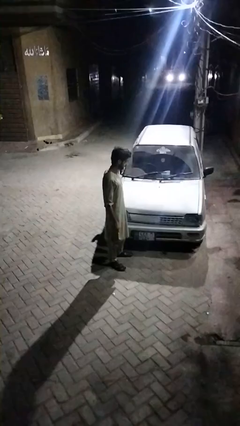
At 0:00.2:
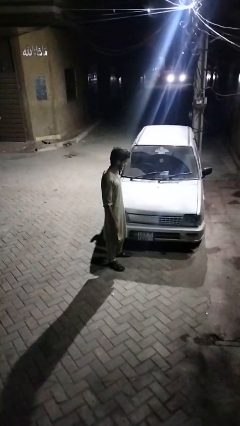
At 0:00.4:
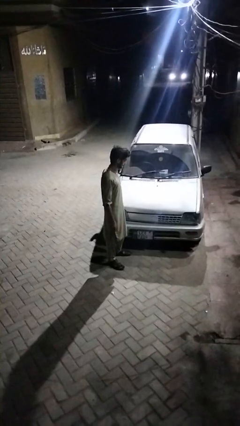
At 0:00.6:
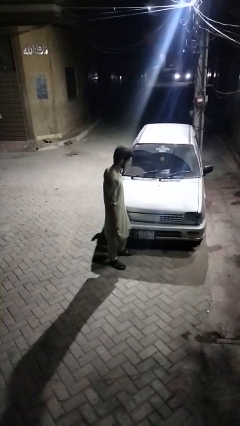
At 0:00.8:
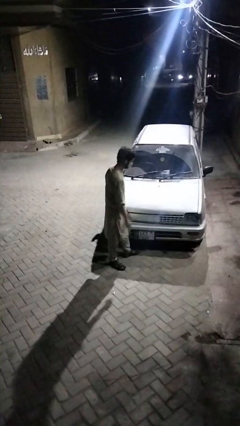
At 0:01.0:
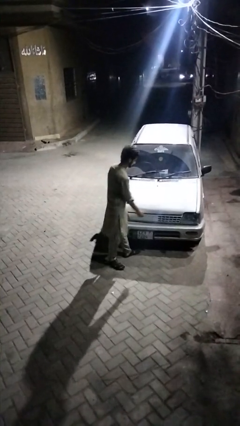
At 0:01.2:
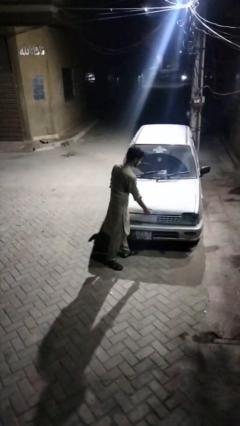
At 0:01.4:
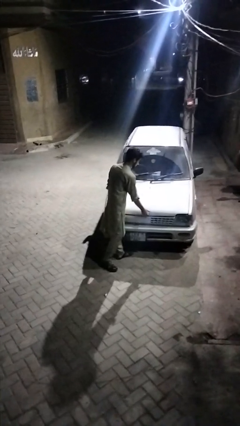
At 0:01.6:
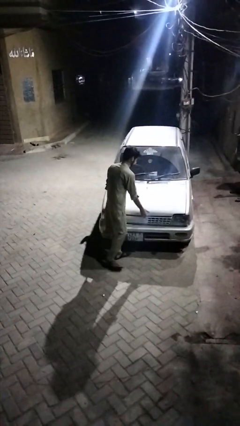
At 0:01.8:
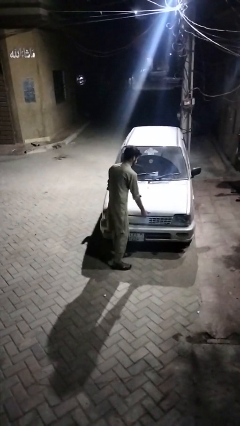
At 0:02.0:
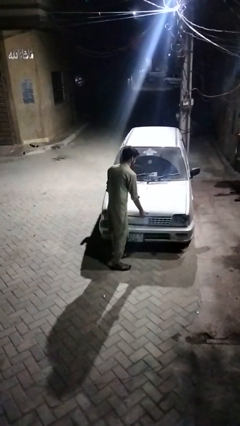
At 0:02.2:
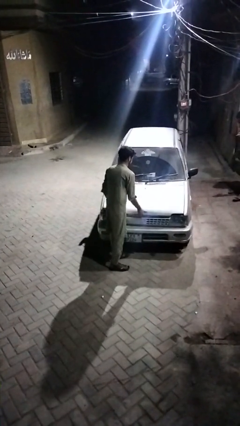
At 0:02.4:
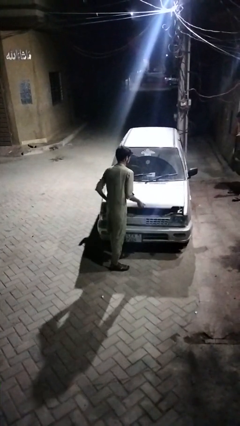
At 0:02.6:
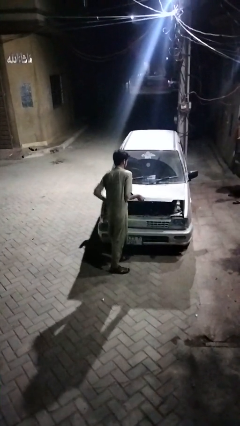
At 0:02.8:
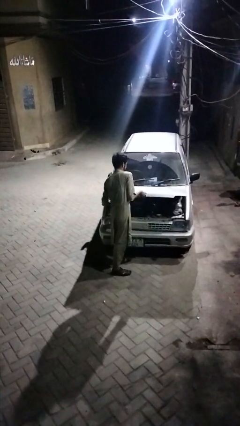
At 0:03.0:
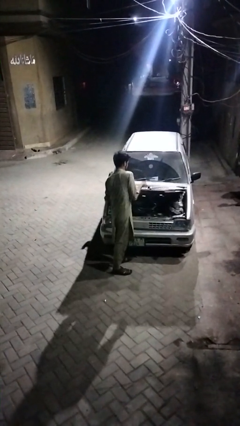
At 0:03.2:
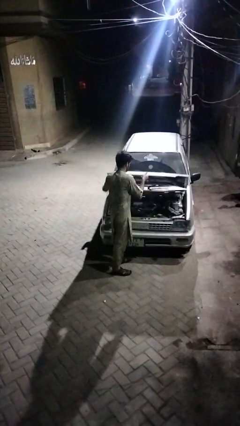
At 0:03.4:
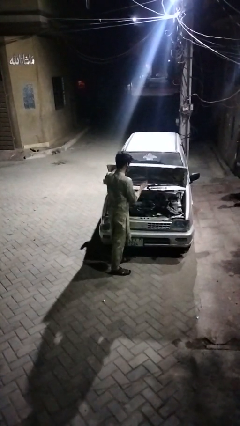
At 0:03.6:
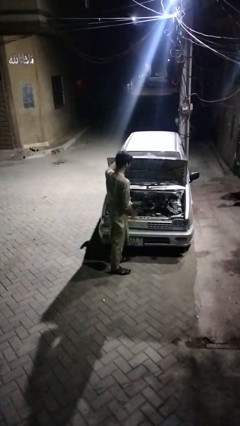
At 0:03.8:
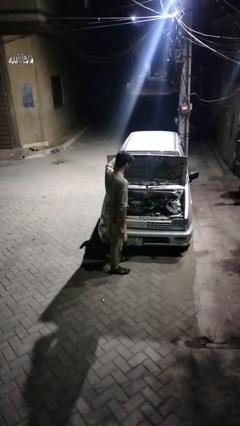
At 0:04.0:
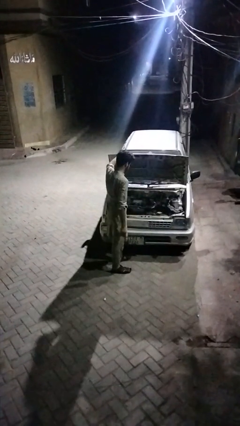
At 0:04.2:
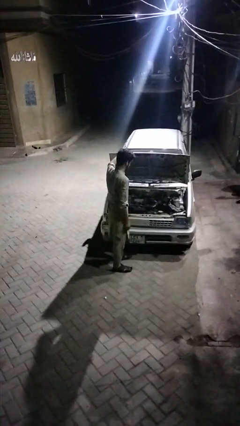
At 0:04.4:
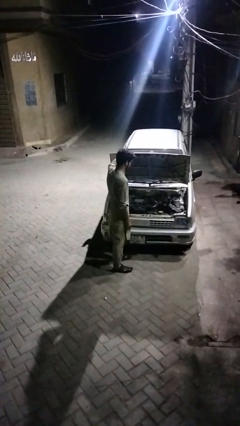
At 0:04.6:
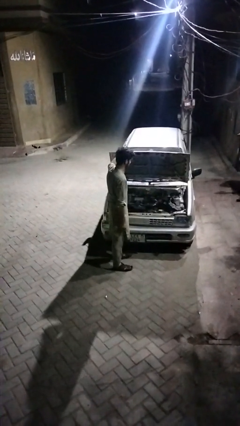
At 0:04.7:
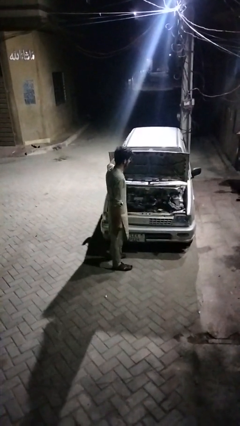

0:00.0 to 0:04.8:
person opens car hood

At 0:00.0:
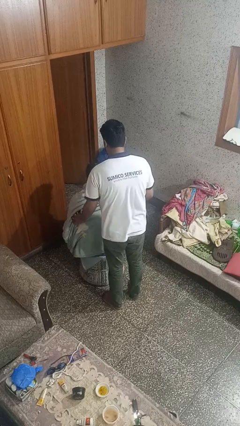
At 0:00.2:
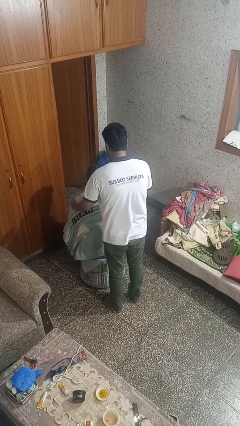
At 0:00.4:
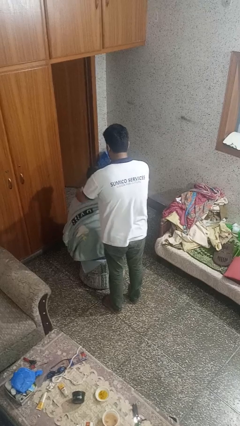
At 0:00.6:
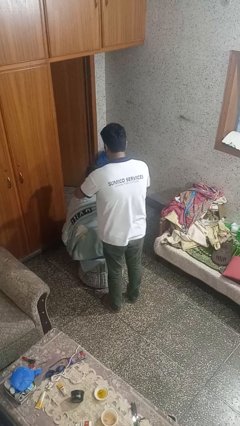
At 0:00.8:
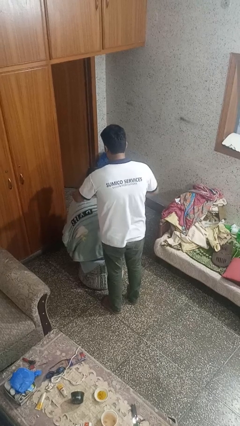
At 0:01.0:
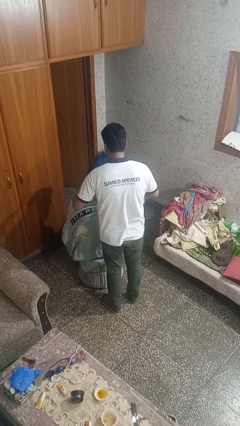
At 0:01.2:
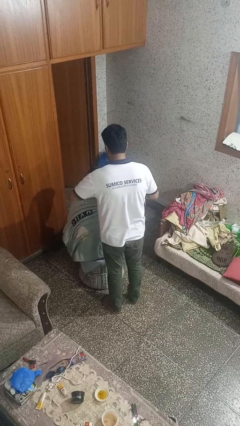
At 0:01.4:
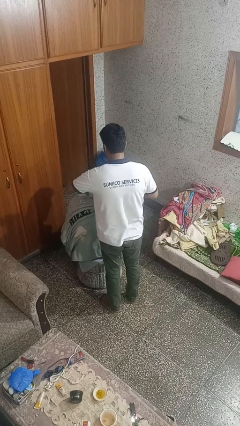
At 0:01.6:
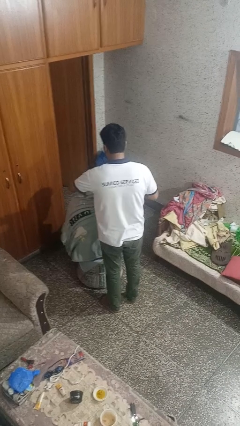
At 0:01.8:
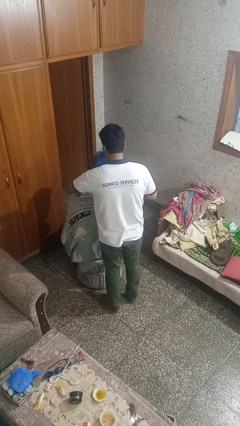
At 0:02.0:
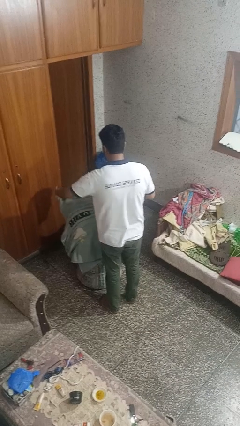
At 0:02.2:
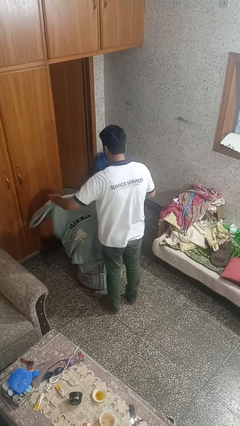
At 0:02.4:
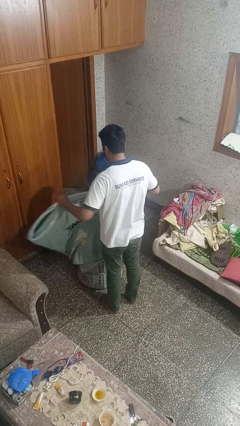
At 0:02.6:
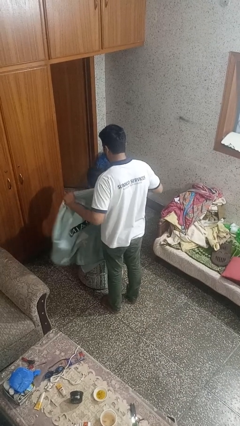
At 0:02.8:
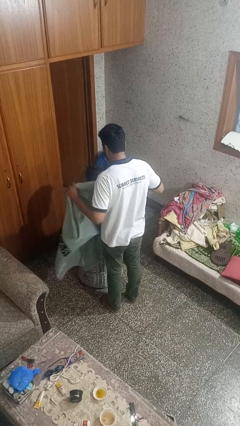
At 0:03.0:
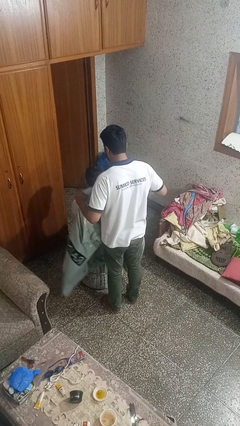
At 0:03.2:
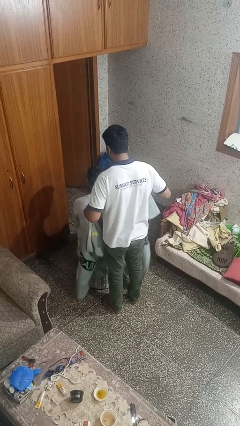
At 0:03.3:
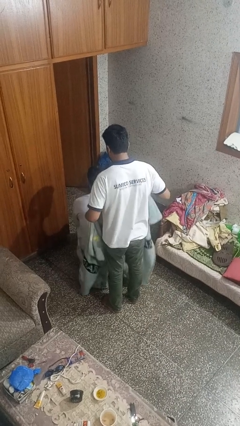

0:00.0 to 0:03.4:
person uncovers friend with blanket

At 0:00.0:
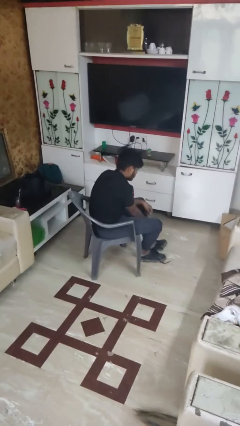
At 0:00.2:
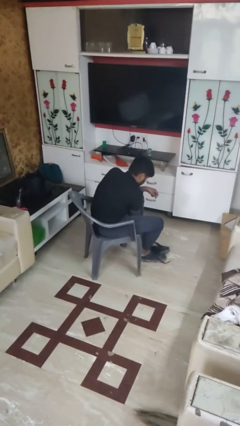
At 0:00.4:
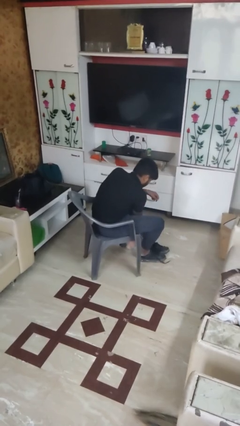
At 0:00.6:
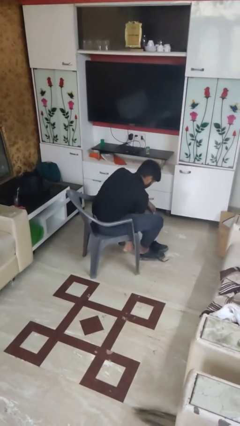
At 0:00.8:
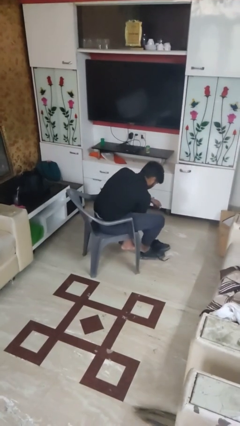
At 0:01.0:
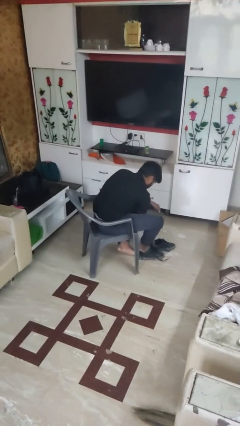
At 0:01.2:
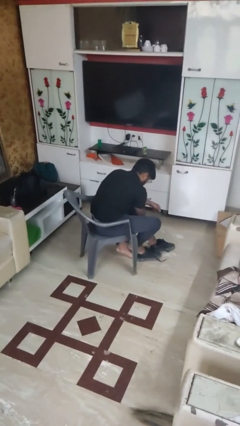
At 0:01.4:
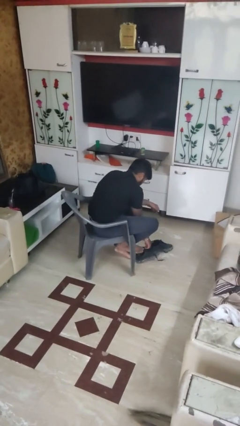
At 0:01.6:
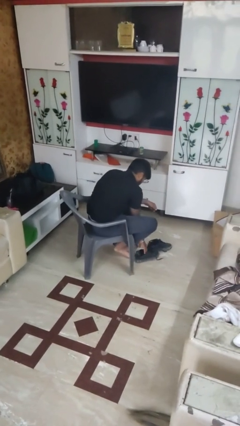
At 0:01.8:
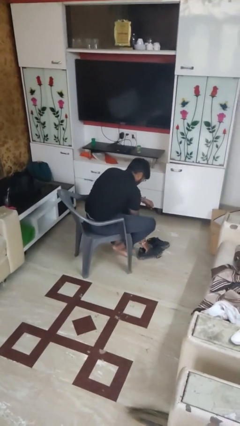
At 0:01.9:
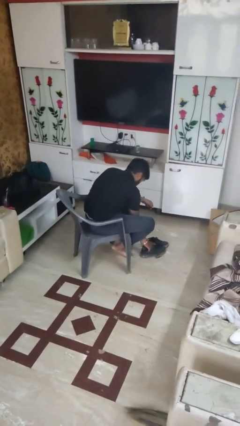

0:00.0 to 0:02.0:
person takes off shoes

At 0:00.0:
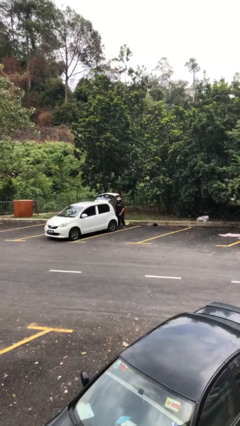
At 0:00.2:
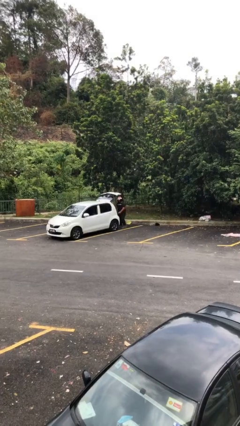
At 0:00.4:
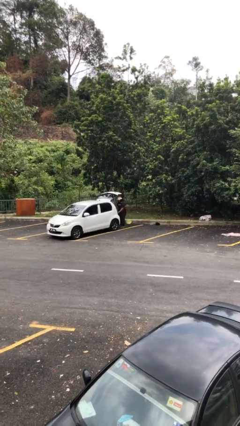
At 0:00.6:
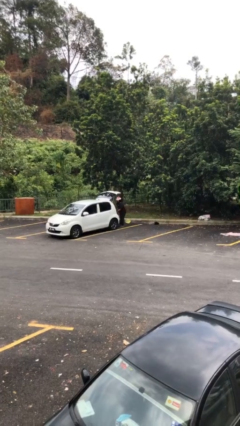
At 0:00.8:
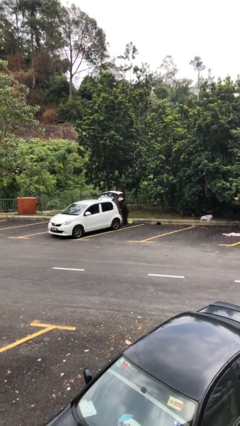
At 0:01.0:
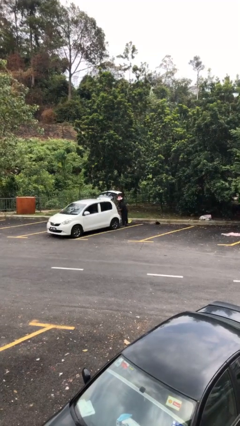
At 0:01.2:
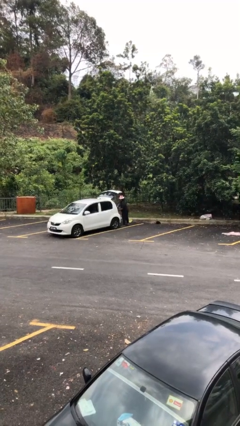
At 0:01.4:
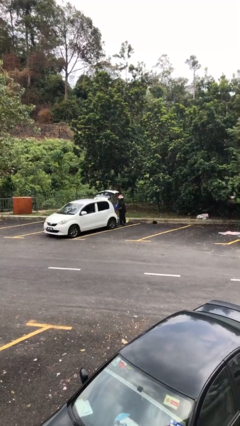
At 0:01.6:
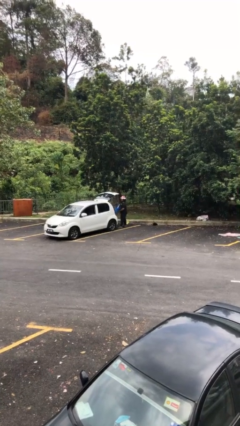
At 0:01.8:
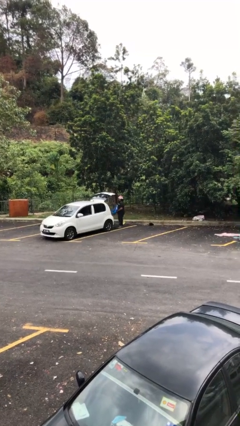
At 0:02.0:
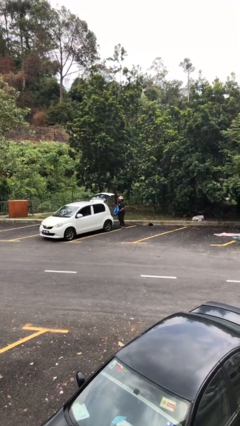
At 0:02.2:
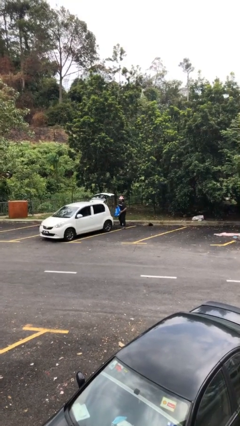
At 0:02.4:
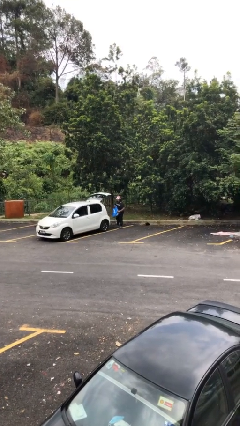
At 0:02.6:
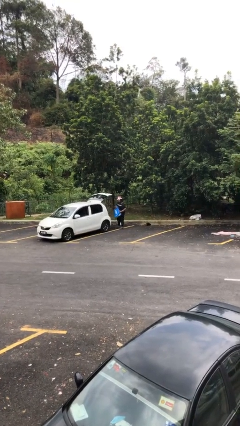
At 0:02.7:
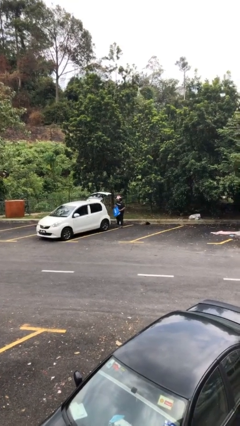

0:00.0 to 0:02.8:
person unloads car

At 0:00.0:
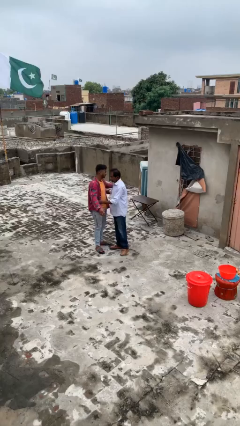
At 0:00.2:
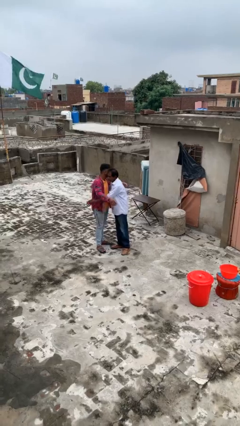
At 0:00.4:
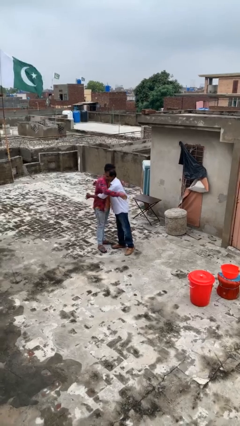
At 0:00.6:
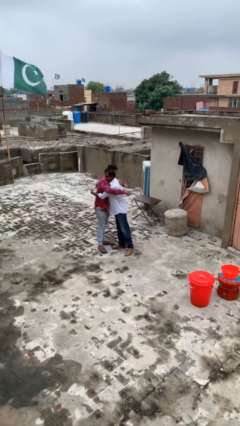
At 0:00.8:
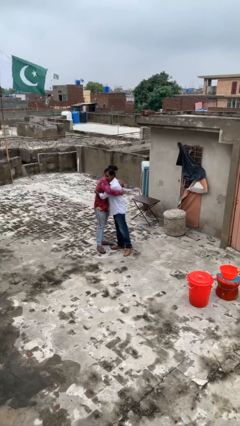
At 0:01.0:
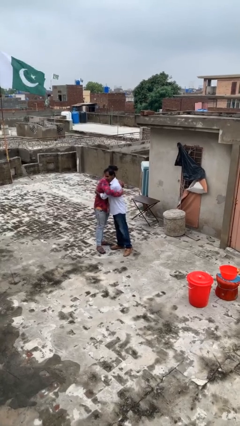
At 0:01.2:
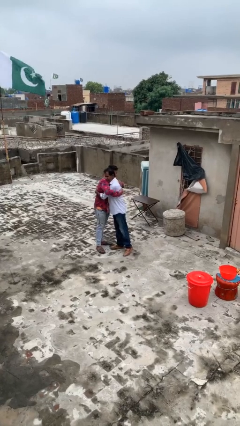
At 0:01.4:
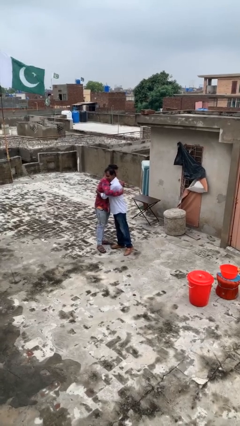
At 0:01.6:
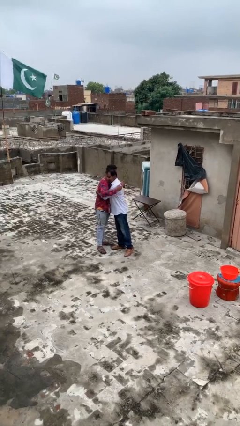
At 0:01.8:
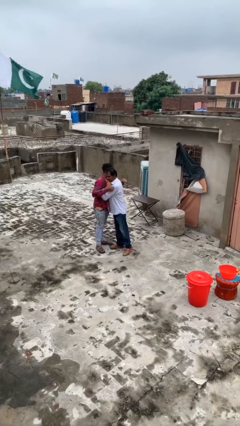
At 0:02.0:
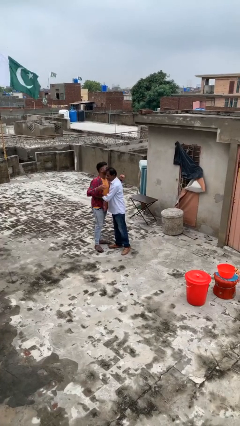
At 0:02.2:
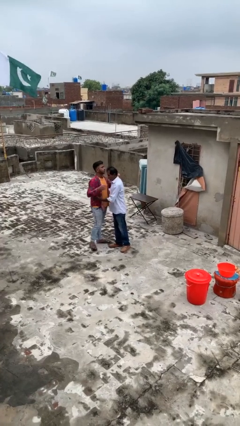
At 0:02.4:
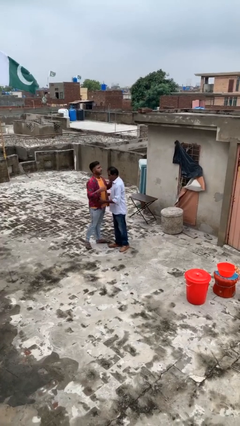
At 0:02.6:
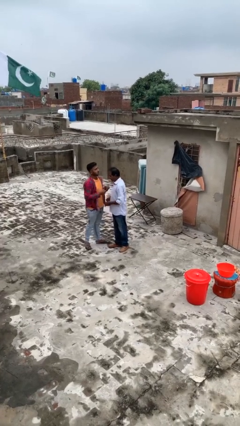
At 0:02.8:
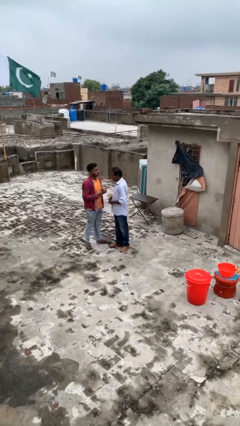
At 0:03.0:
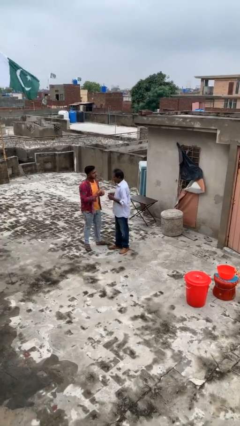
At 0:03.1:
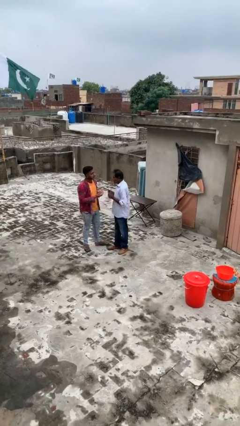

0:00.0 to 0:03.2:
person embraces person

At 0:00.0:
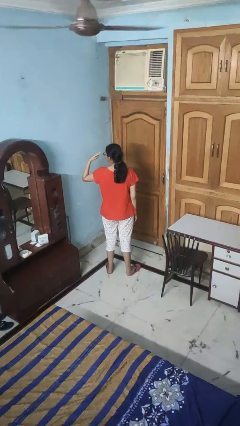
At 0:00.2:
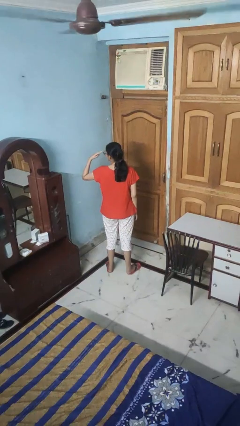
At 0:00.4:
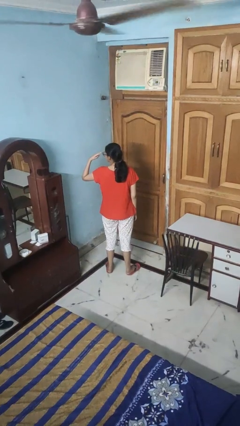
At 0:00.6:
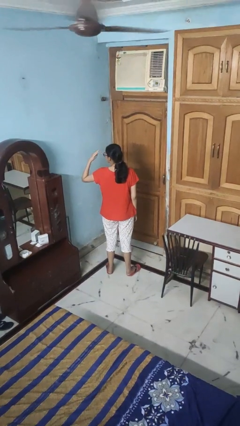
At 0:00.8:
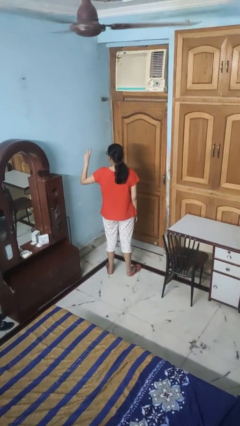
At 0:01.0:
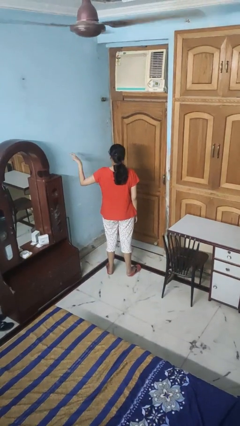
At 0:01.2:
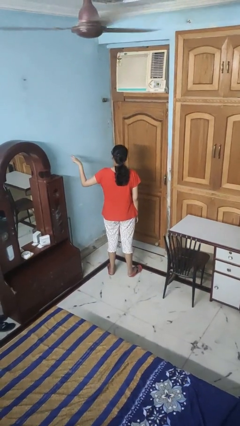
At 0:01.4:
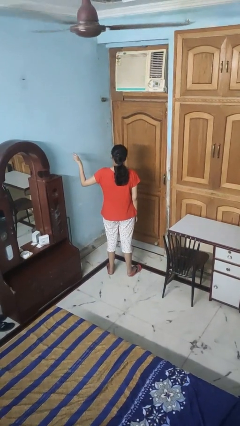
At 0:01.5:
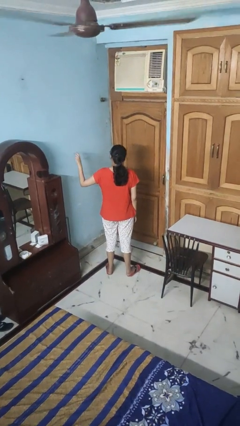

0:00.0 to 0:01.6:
person gestures watch closely
